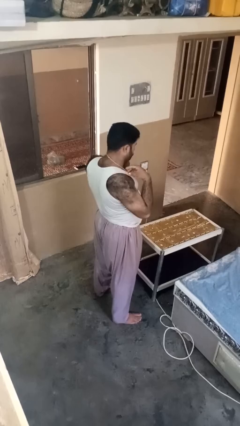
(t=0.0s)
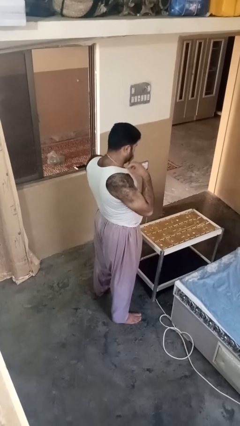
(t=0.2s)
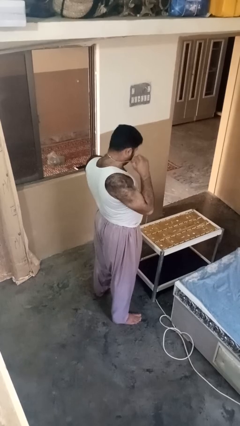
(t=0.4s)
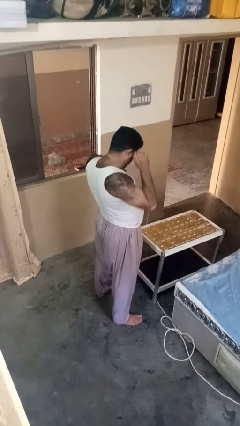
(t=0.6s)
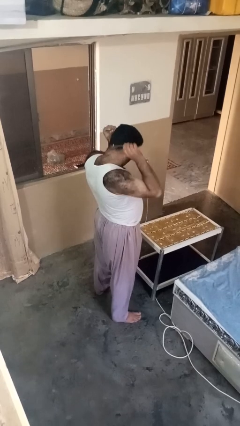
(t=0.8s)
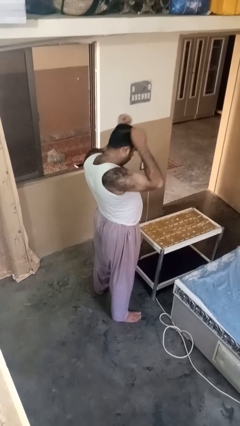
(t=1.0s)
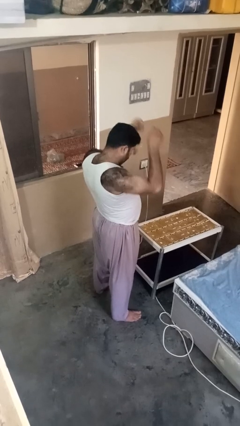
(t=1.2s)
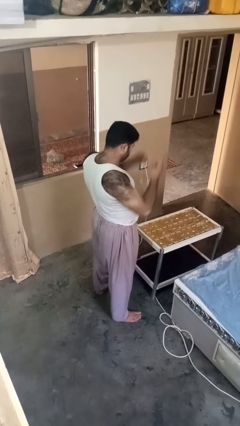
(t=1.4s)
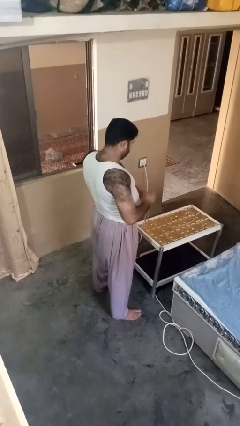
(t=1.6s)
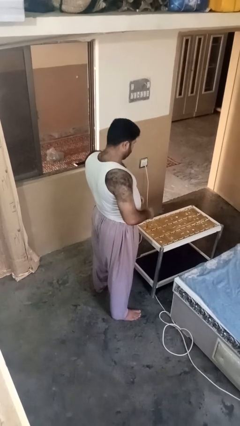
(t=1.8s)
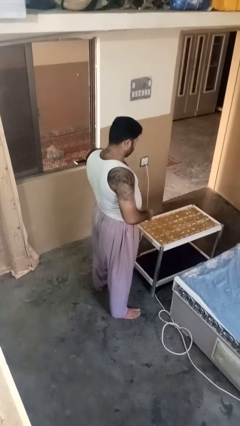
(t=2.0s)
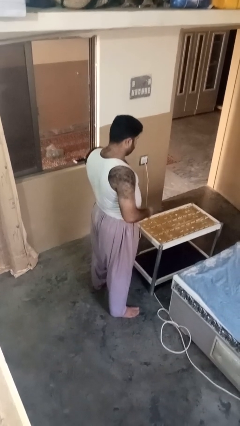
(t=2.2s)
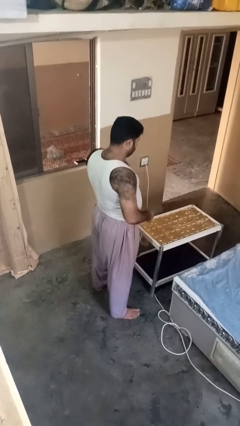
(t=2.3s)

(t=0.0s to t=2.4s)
person takes off necklace

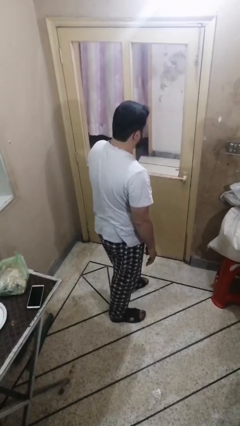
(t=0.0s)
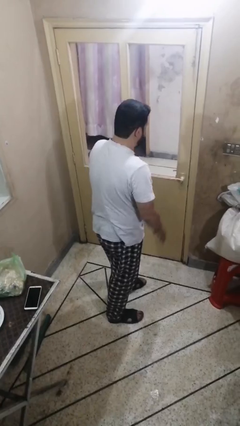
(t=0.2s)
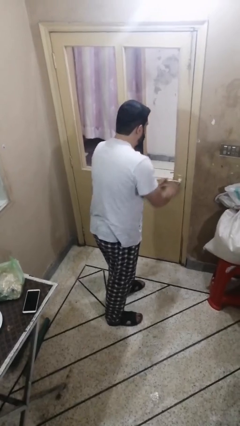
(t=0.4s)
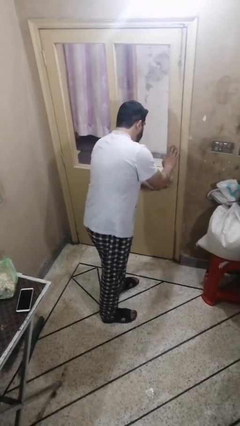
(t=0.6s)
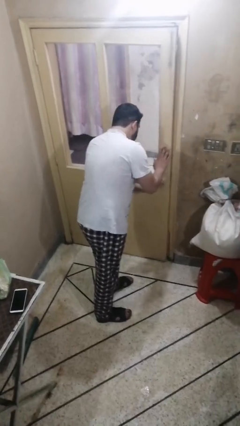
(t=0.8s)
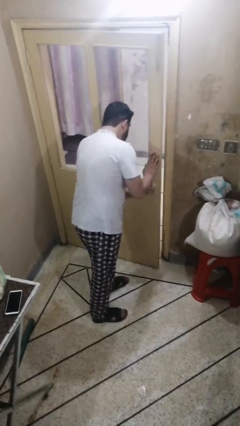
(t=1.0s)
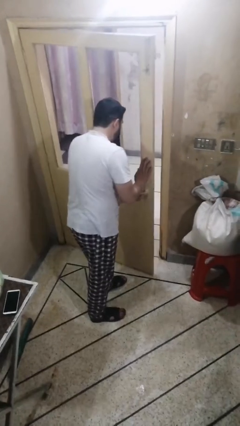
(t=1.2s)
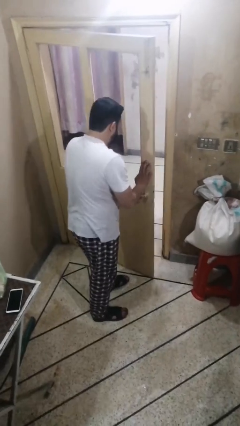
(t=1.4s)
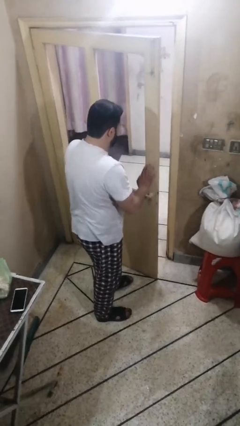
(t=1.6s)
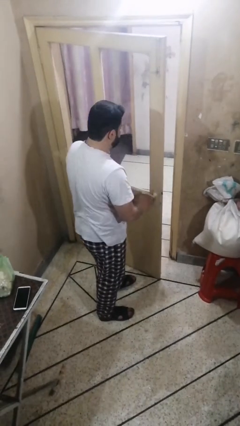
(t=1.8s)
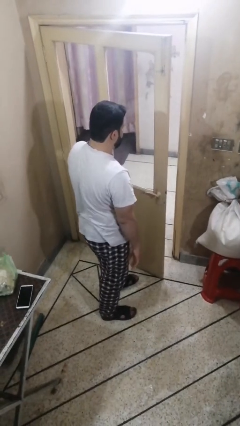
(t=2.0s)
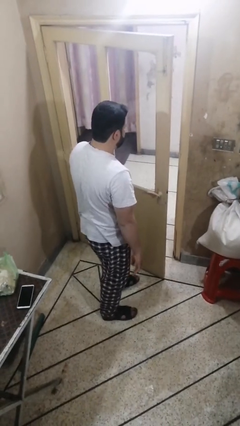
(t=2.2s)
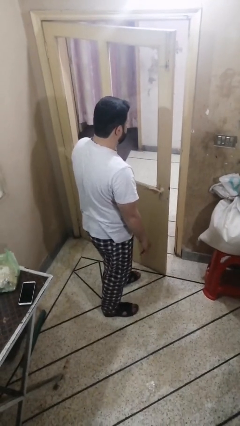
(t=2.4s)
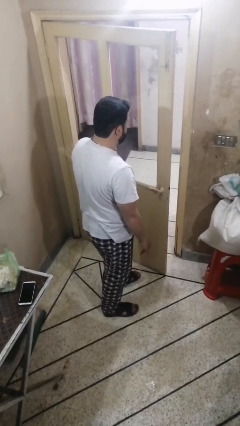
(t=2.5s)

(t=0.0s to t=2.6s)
person opens facility door

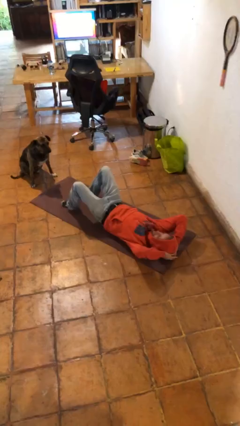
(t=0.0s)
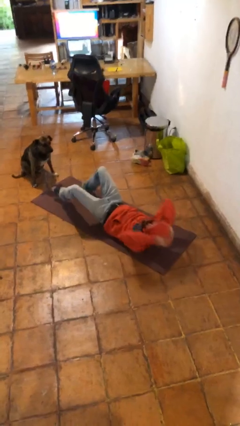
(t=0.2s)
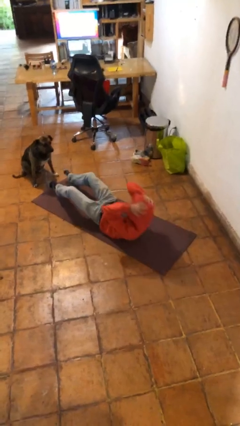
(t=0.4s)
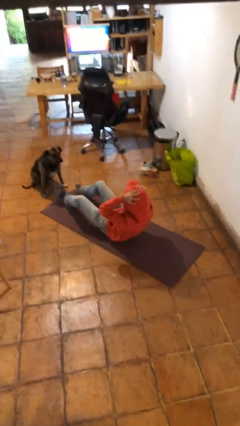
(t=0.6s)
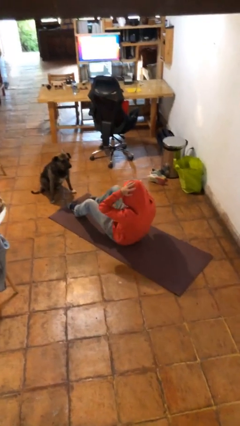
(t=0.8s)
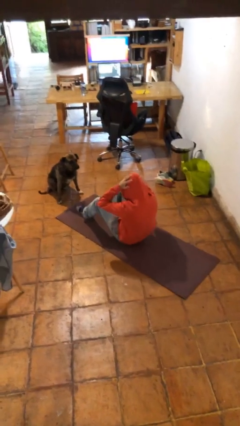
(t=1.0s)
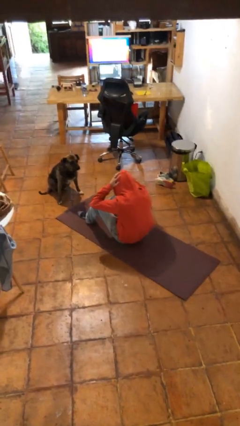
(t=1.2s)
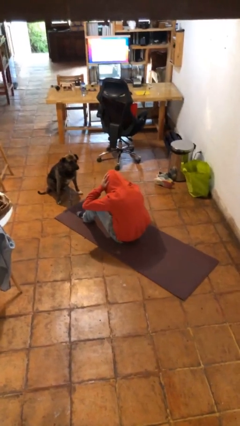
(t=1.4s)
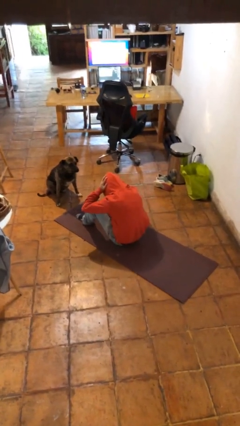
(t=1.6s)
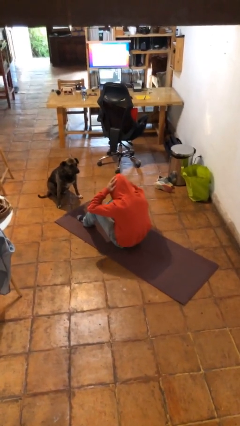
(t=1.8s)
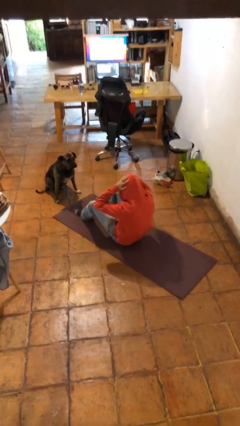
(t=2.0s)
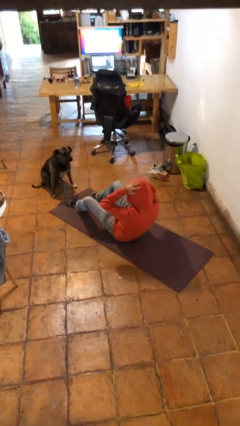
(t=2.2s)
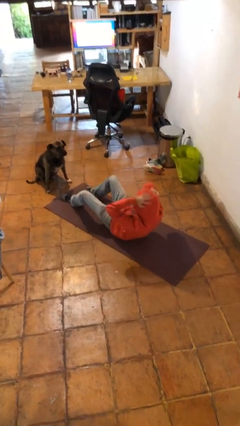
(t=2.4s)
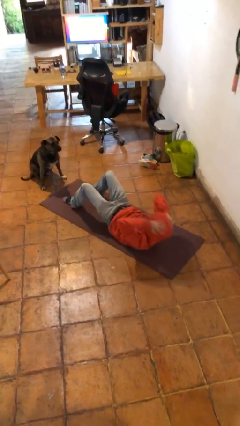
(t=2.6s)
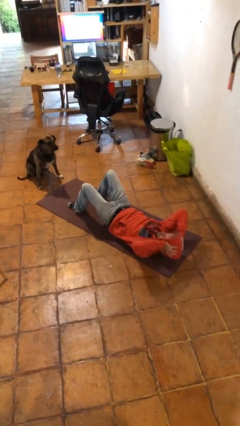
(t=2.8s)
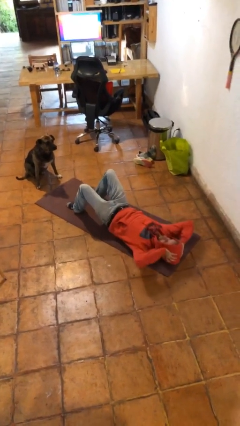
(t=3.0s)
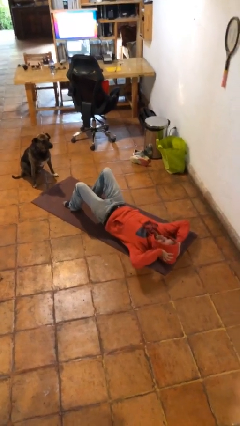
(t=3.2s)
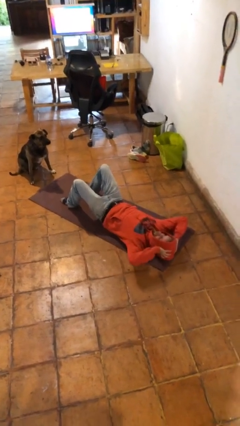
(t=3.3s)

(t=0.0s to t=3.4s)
person exercises with situp

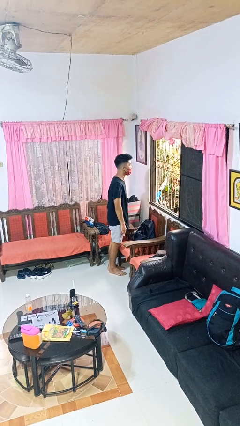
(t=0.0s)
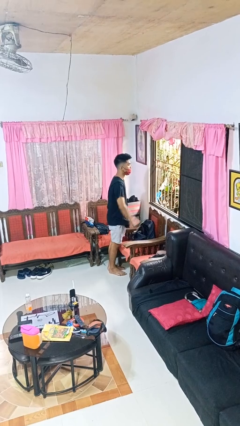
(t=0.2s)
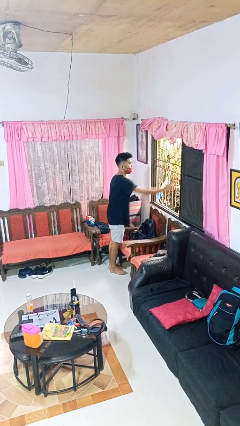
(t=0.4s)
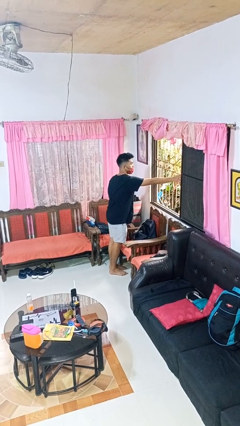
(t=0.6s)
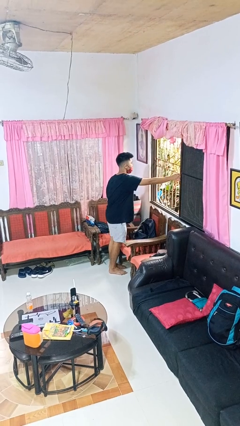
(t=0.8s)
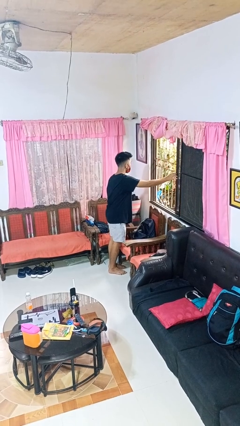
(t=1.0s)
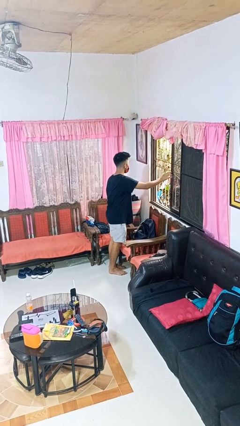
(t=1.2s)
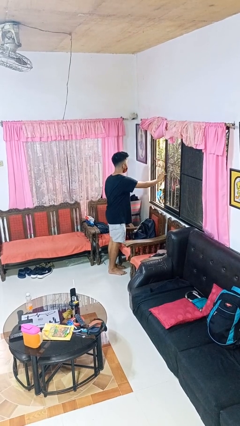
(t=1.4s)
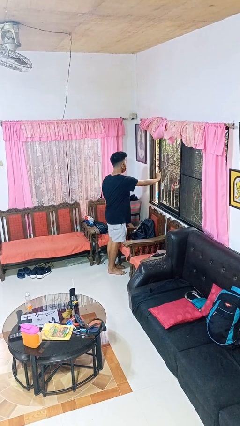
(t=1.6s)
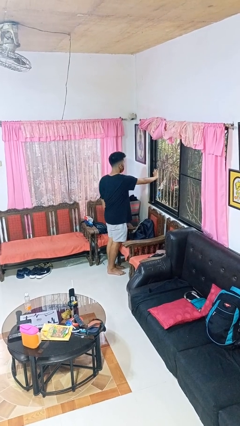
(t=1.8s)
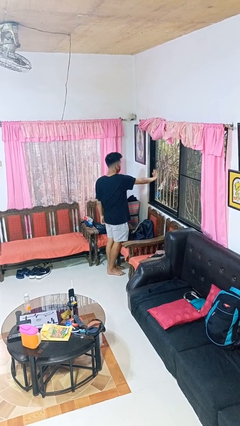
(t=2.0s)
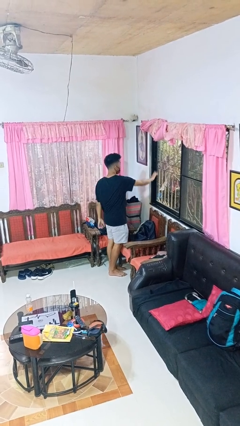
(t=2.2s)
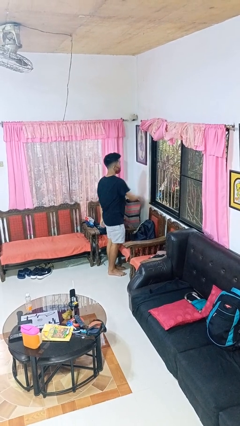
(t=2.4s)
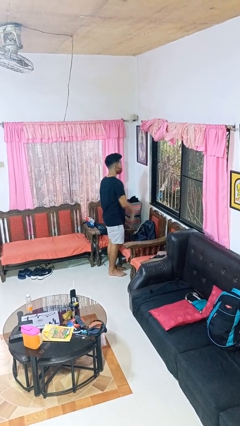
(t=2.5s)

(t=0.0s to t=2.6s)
person closes home window

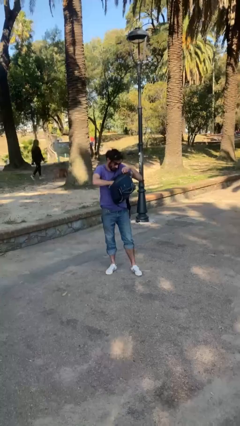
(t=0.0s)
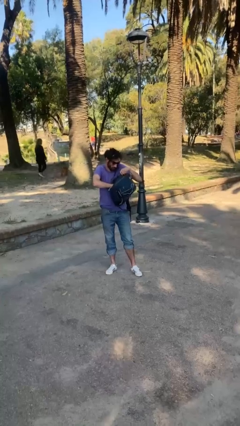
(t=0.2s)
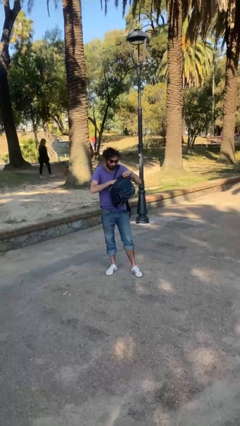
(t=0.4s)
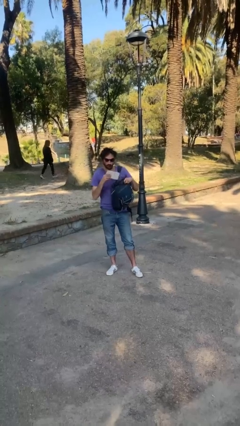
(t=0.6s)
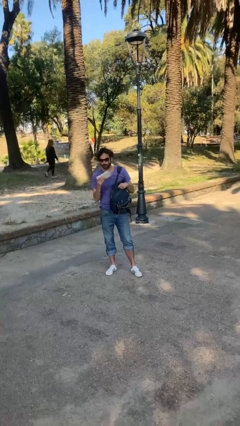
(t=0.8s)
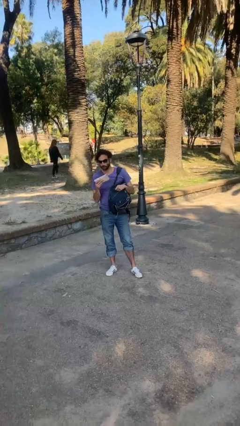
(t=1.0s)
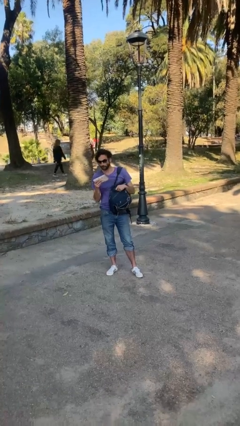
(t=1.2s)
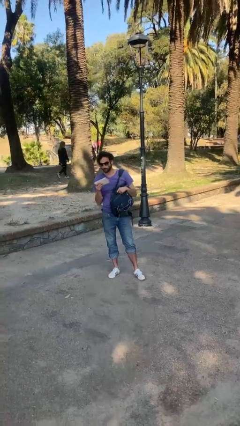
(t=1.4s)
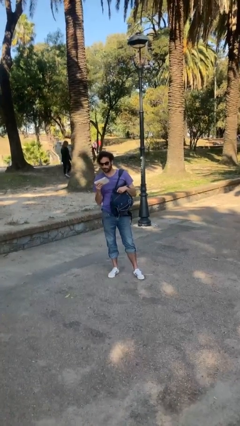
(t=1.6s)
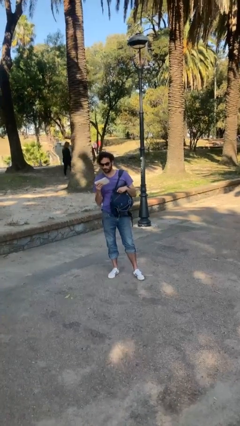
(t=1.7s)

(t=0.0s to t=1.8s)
person takes object from backpack

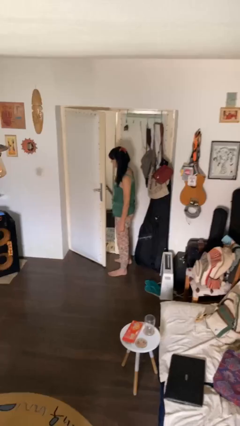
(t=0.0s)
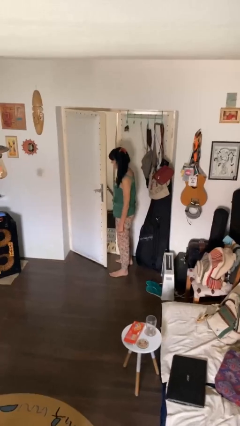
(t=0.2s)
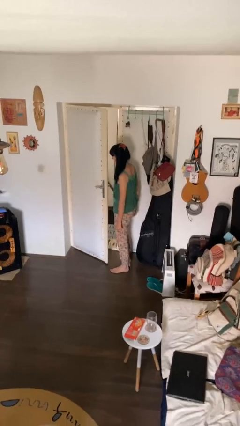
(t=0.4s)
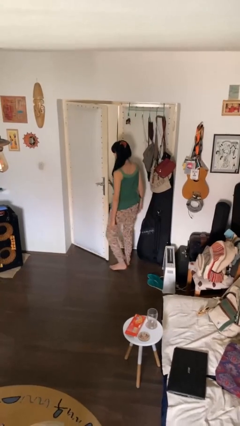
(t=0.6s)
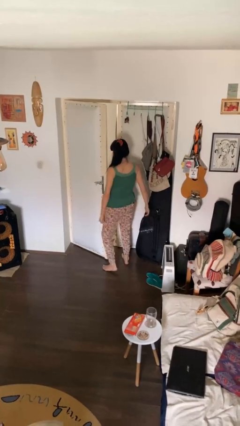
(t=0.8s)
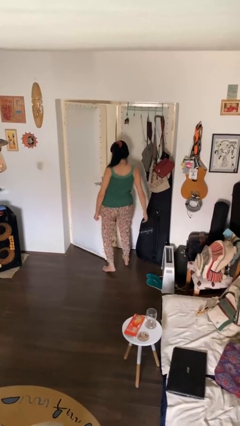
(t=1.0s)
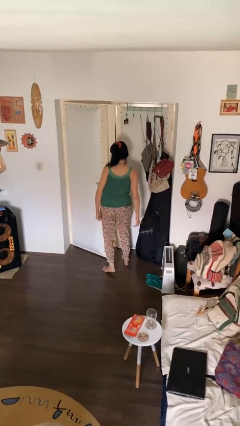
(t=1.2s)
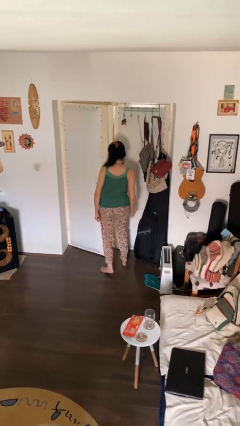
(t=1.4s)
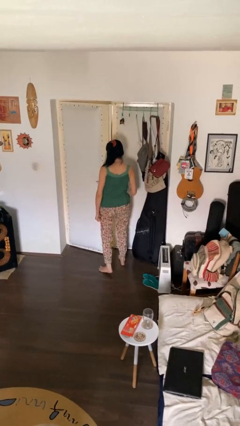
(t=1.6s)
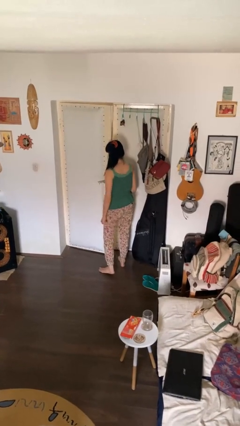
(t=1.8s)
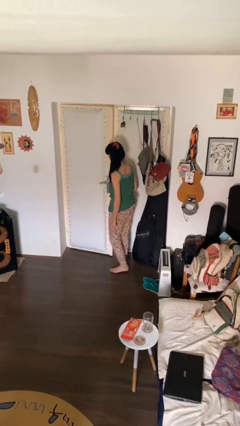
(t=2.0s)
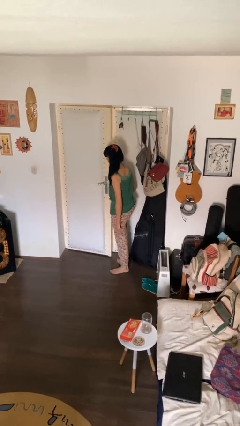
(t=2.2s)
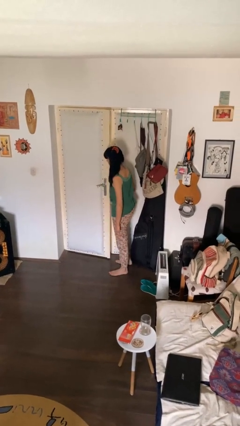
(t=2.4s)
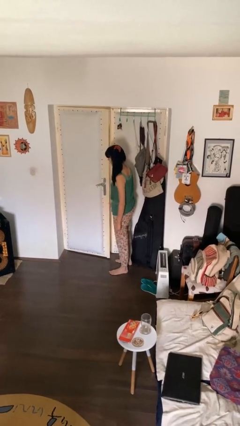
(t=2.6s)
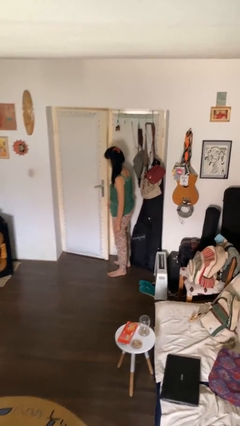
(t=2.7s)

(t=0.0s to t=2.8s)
person closes door with hip

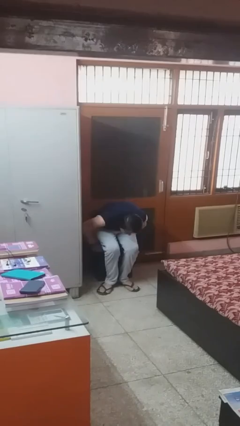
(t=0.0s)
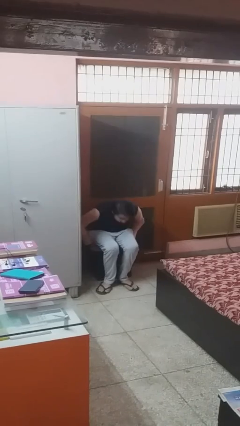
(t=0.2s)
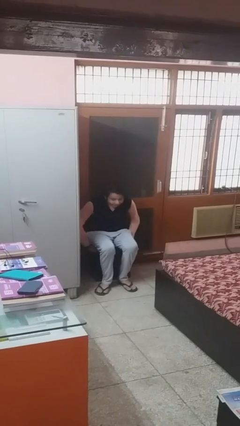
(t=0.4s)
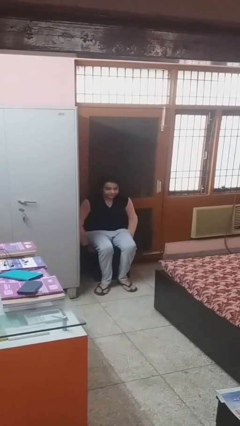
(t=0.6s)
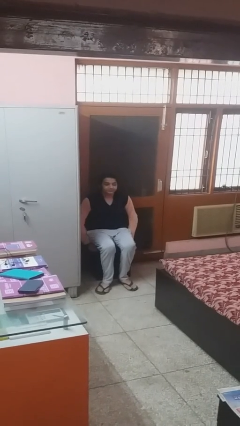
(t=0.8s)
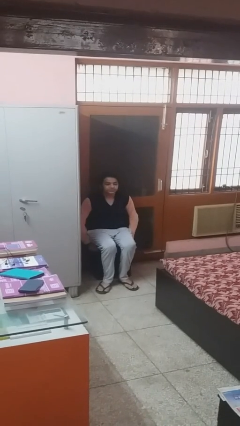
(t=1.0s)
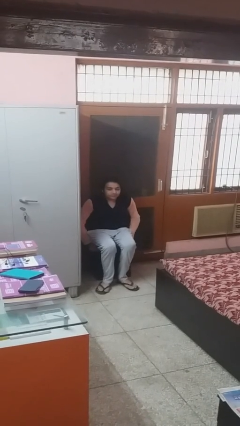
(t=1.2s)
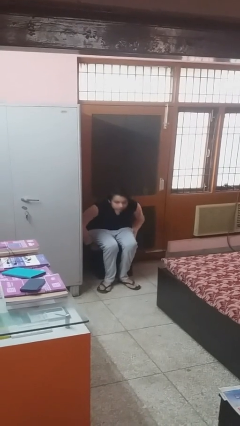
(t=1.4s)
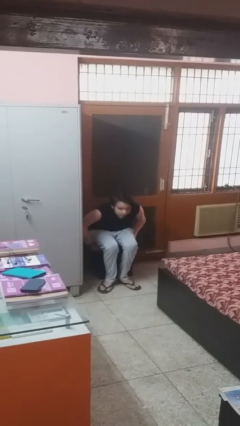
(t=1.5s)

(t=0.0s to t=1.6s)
person sits down
